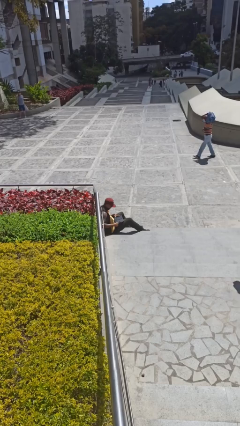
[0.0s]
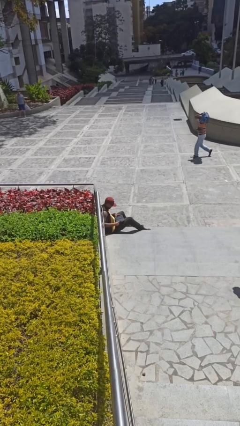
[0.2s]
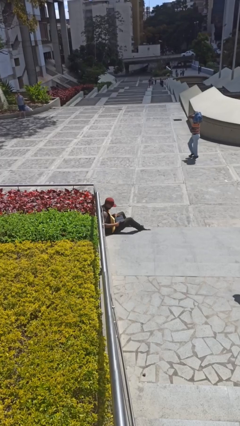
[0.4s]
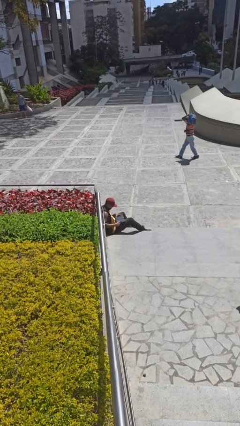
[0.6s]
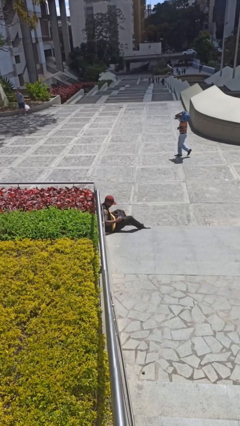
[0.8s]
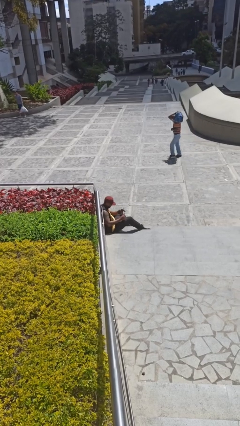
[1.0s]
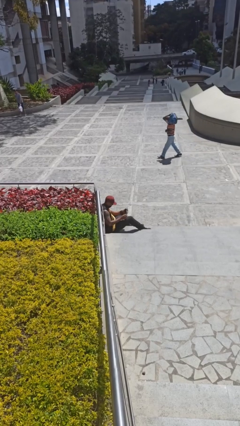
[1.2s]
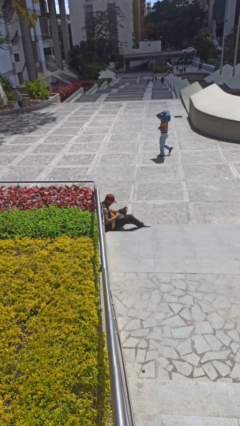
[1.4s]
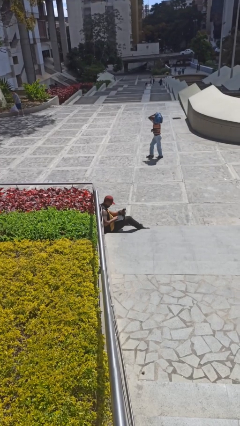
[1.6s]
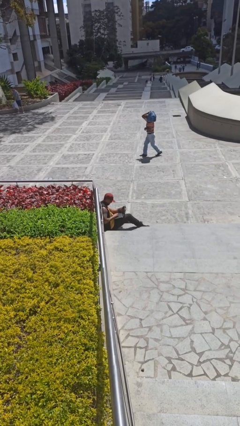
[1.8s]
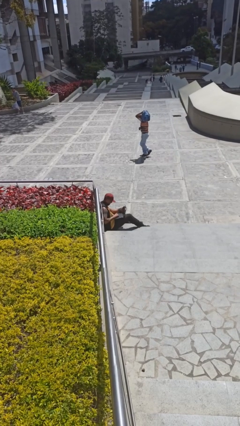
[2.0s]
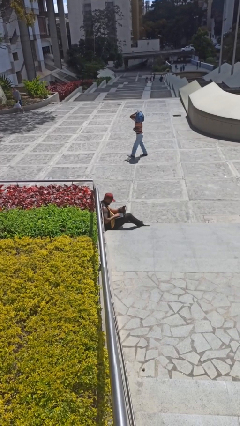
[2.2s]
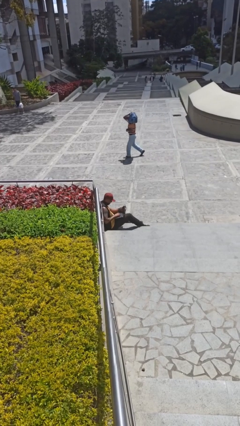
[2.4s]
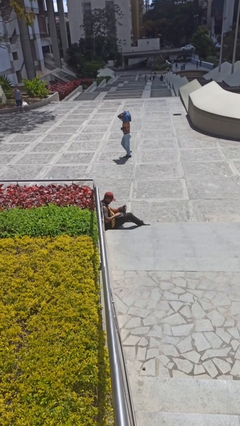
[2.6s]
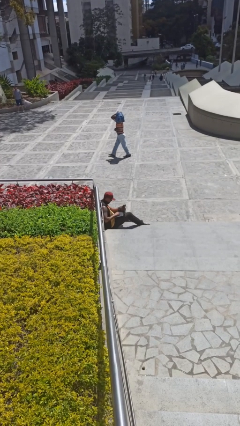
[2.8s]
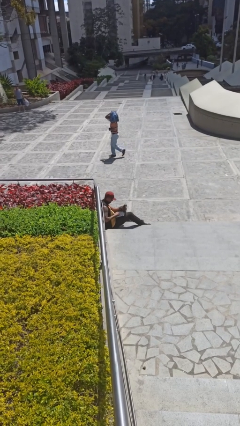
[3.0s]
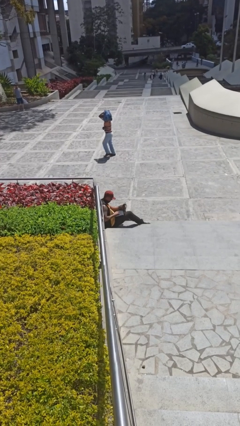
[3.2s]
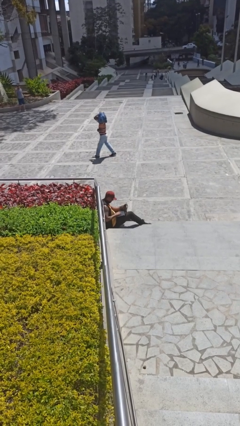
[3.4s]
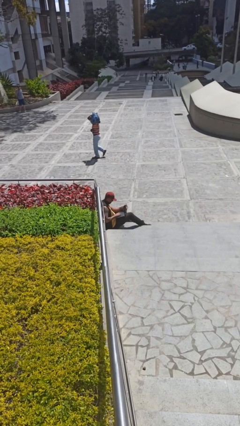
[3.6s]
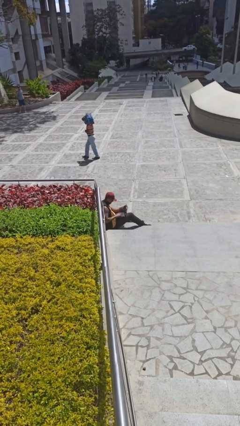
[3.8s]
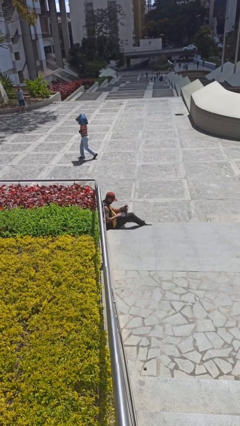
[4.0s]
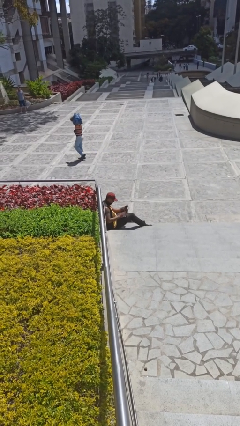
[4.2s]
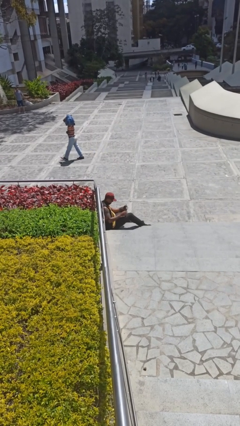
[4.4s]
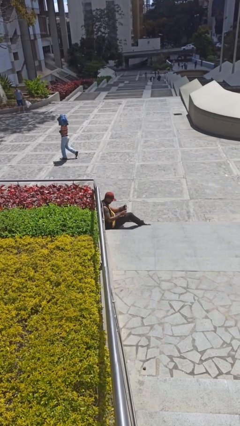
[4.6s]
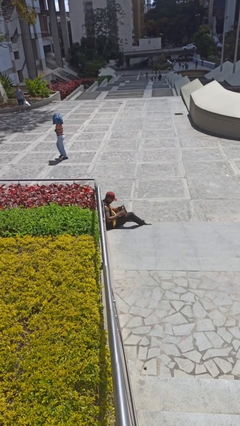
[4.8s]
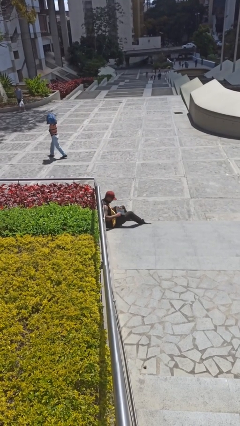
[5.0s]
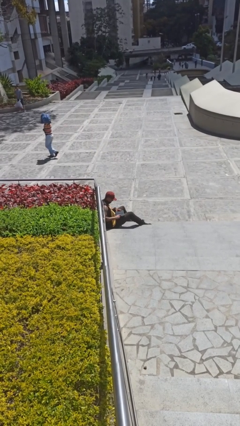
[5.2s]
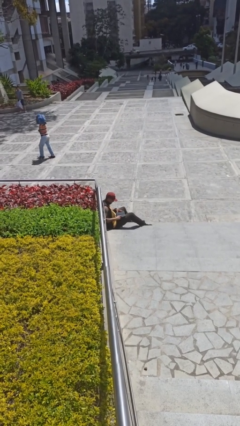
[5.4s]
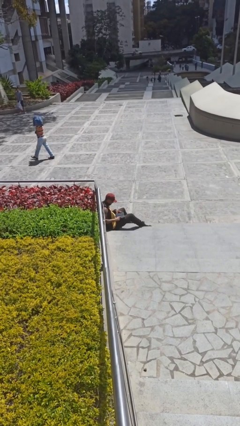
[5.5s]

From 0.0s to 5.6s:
person interacts with laptop

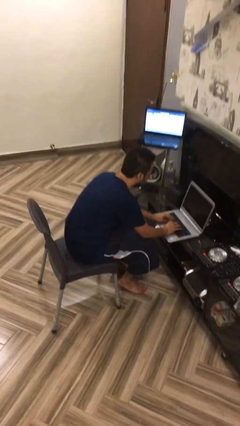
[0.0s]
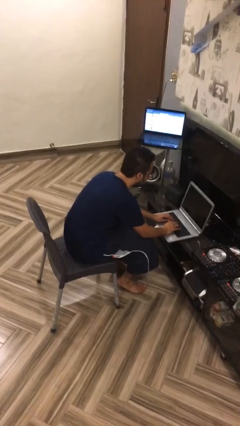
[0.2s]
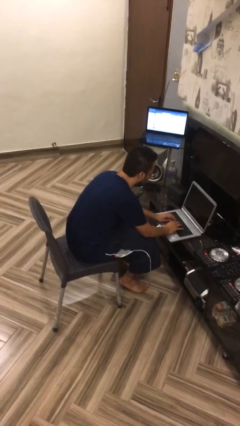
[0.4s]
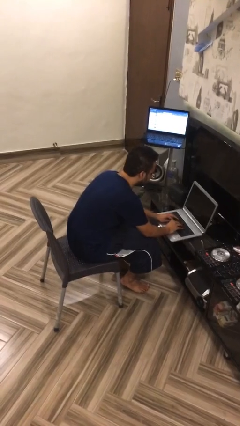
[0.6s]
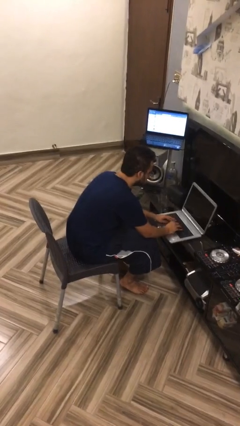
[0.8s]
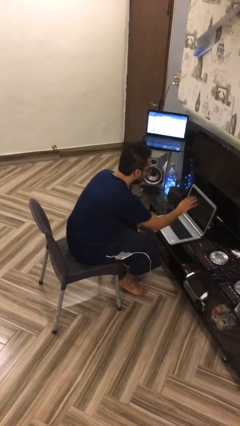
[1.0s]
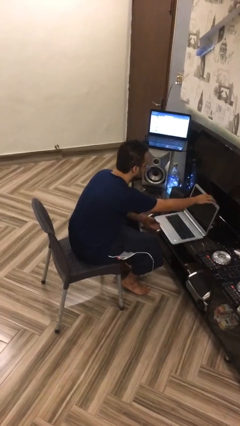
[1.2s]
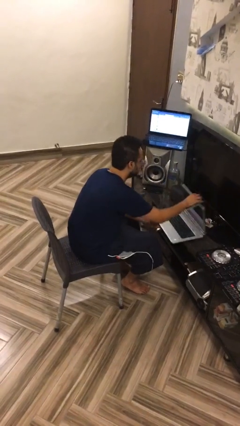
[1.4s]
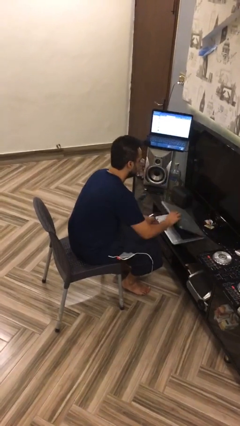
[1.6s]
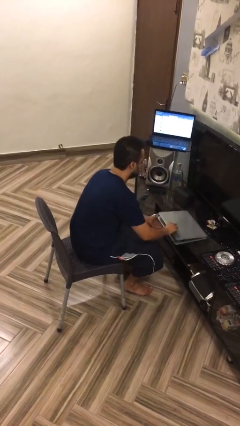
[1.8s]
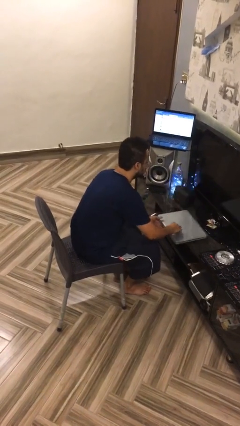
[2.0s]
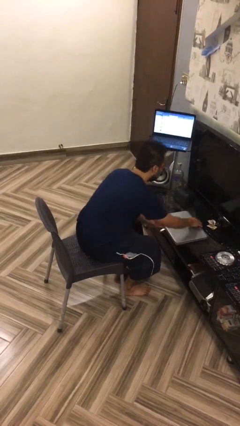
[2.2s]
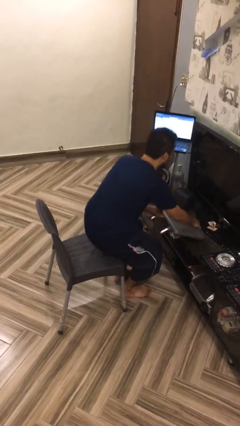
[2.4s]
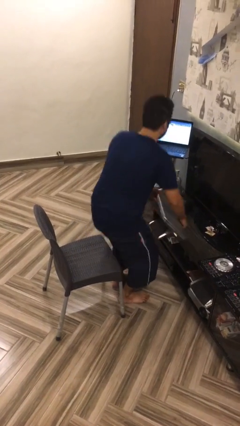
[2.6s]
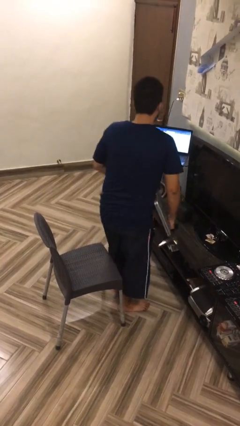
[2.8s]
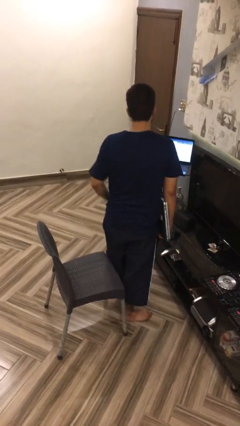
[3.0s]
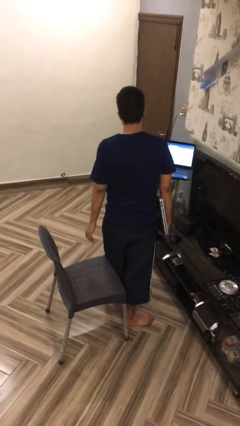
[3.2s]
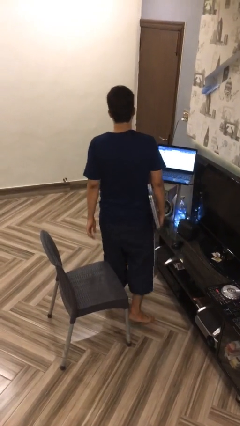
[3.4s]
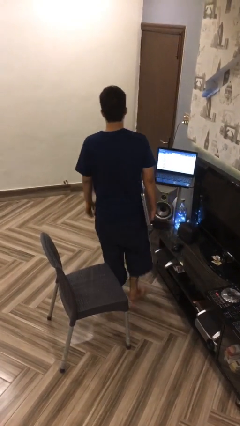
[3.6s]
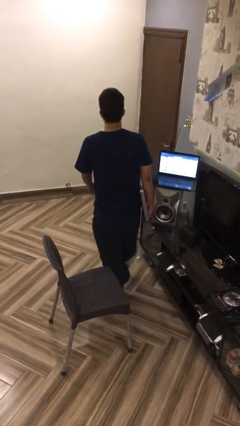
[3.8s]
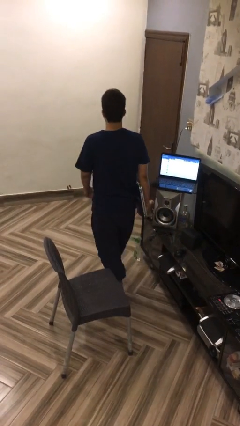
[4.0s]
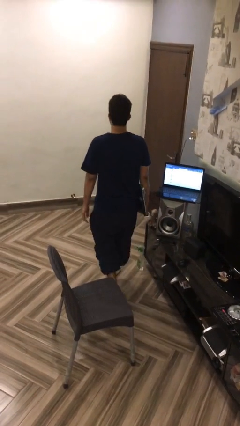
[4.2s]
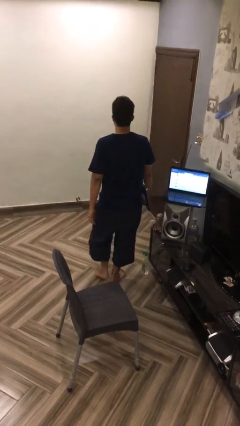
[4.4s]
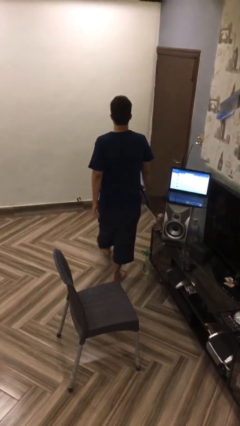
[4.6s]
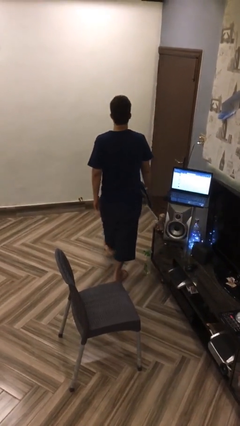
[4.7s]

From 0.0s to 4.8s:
person stands up

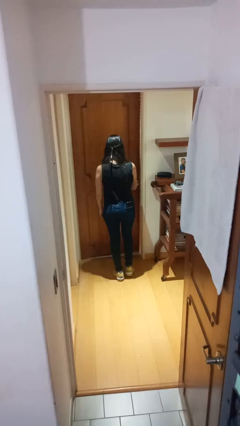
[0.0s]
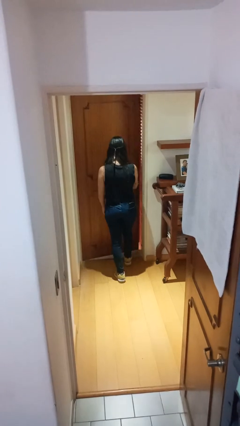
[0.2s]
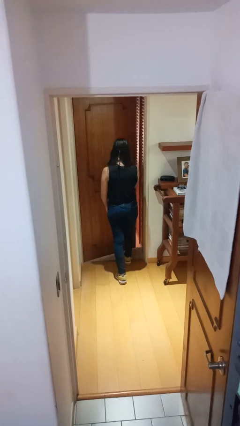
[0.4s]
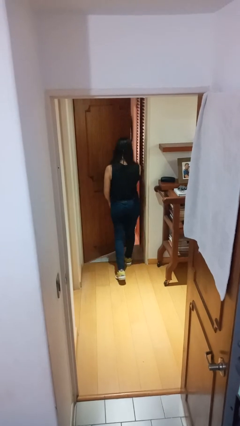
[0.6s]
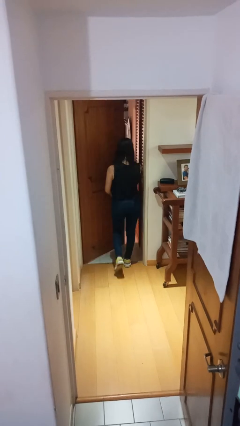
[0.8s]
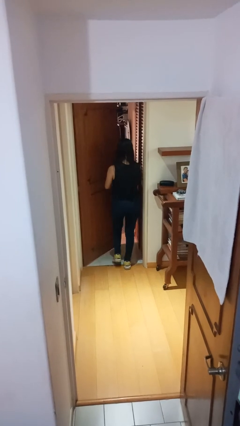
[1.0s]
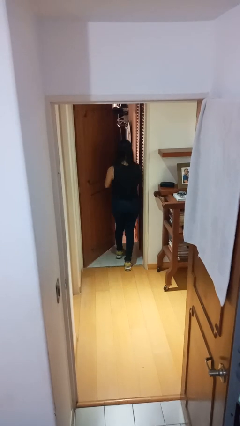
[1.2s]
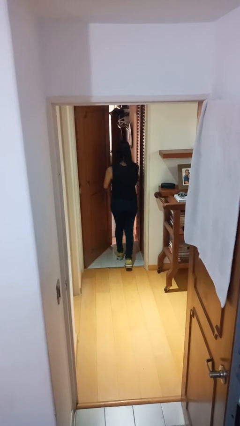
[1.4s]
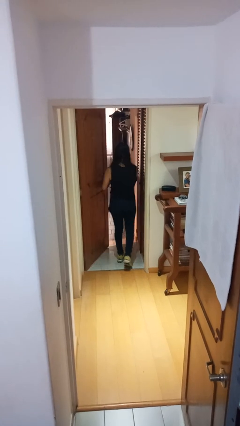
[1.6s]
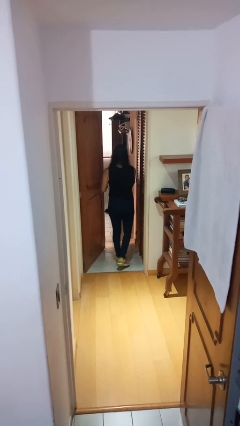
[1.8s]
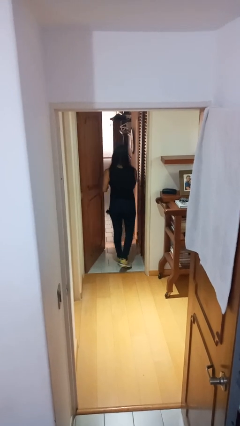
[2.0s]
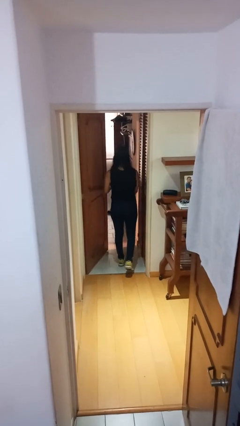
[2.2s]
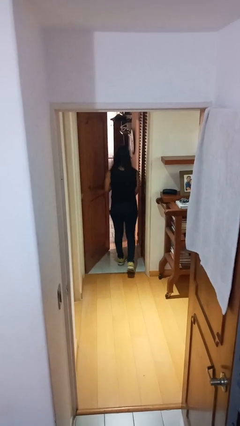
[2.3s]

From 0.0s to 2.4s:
person opens facility door

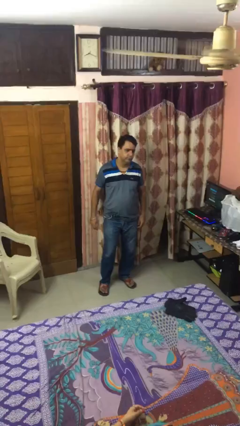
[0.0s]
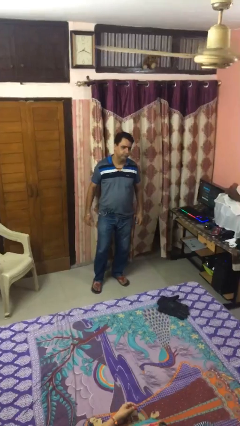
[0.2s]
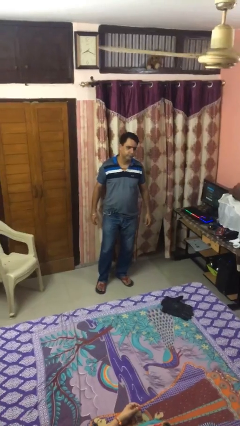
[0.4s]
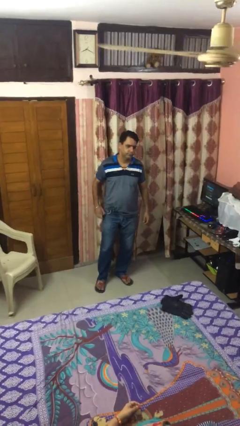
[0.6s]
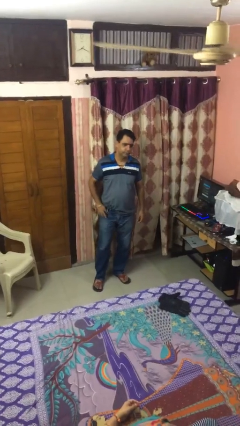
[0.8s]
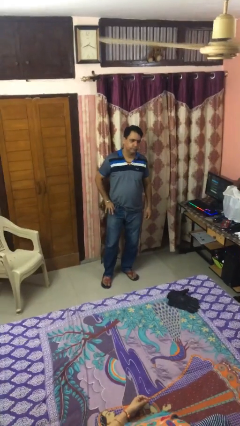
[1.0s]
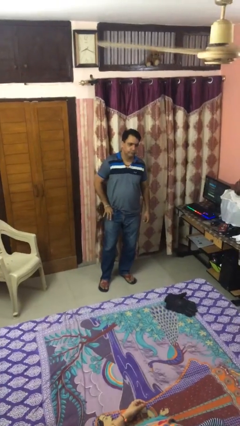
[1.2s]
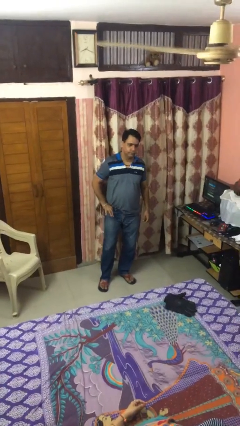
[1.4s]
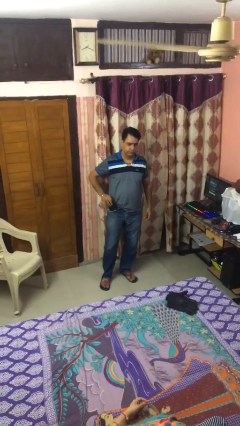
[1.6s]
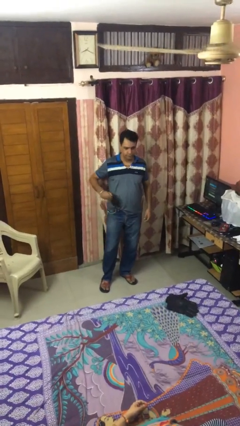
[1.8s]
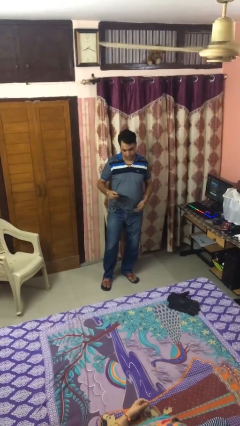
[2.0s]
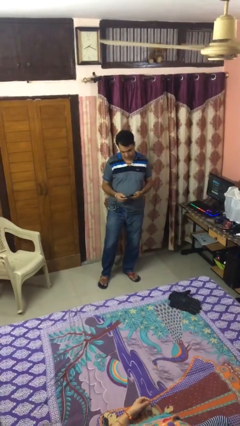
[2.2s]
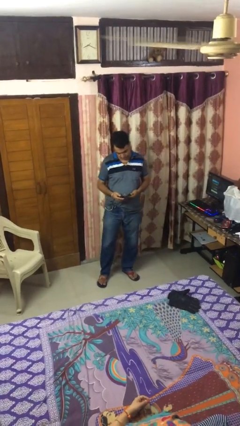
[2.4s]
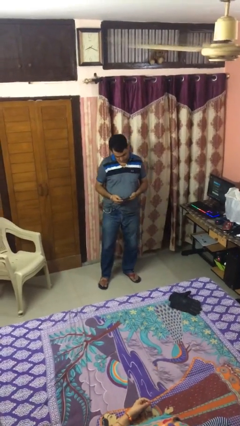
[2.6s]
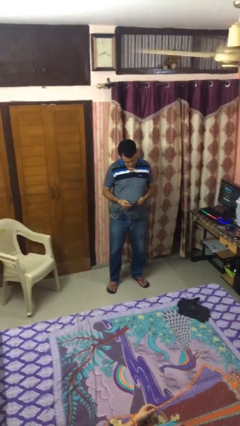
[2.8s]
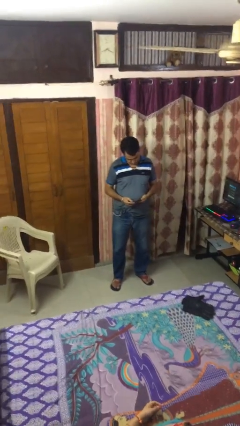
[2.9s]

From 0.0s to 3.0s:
person takes phone from pocket

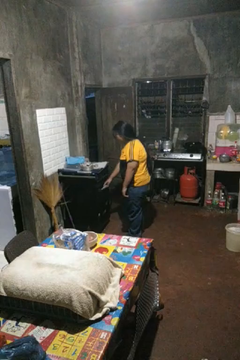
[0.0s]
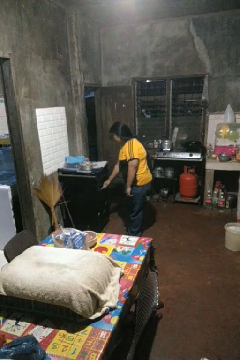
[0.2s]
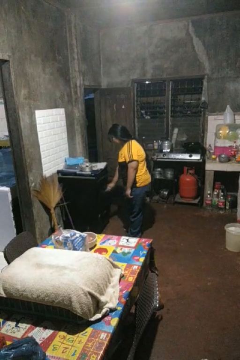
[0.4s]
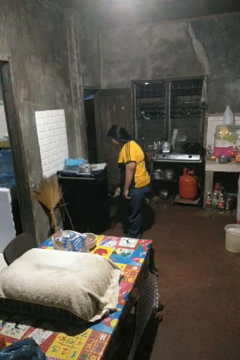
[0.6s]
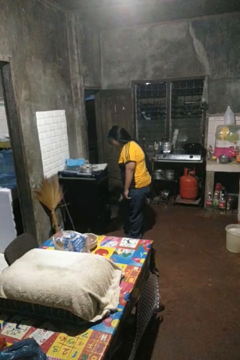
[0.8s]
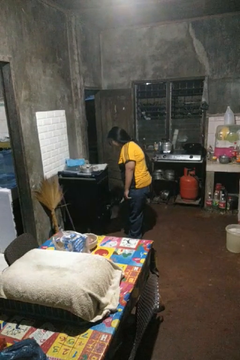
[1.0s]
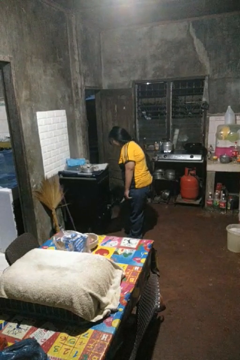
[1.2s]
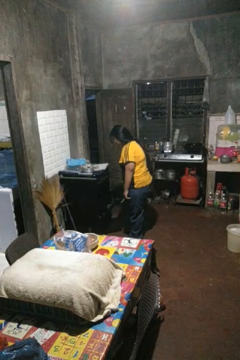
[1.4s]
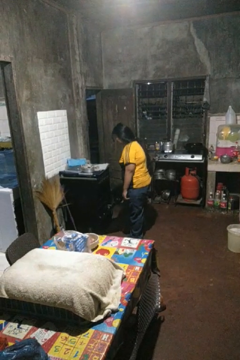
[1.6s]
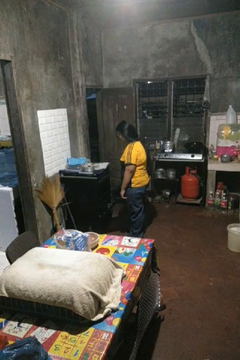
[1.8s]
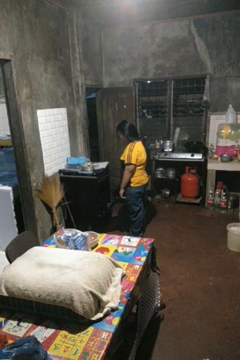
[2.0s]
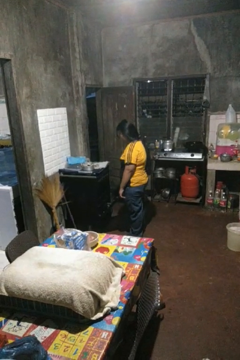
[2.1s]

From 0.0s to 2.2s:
person opens oven door
